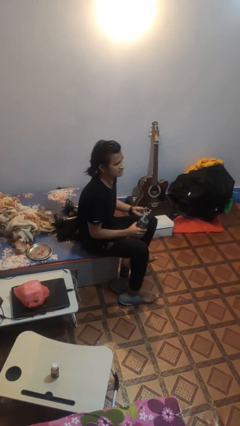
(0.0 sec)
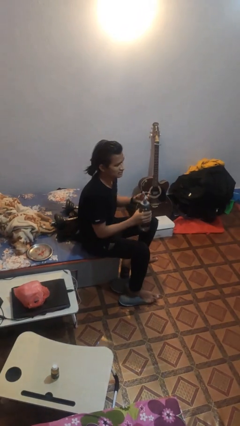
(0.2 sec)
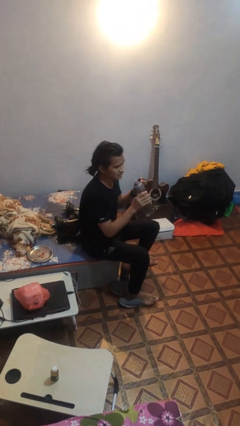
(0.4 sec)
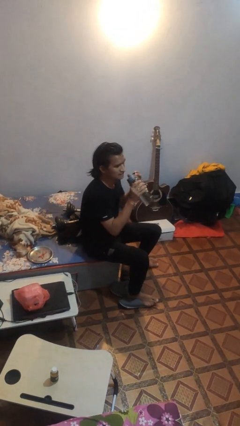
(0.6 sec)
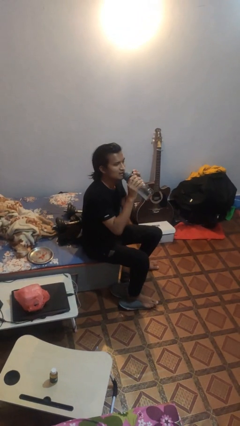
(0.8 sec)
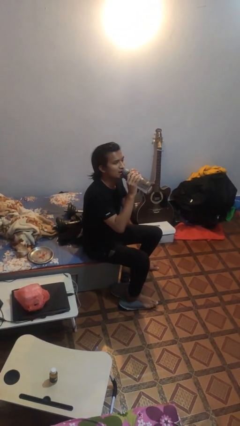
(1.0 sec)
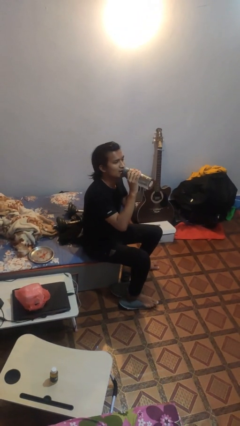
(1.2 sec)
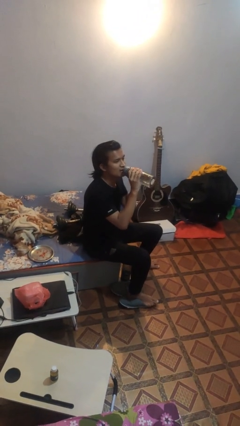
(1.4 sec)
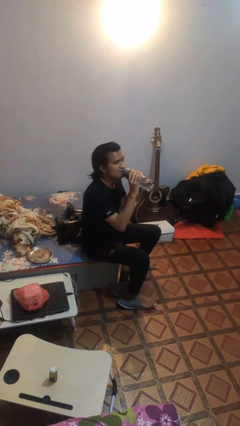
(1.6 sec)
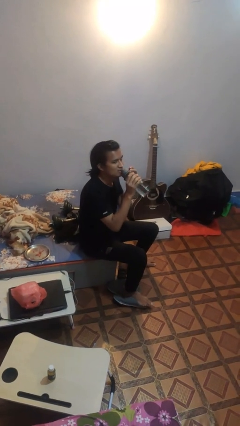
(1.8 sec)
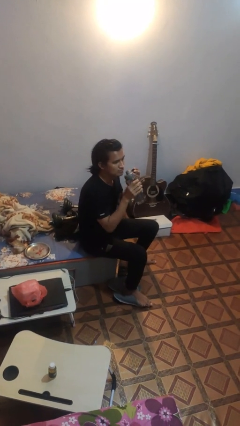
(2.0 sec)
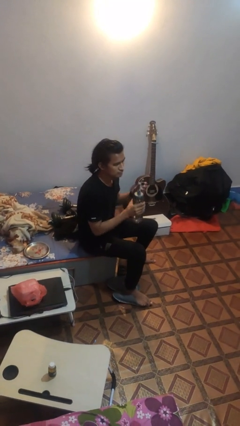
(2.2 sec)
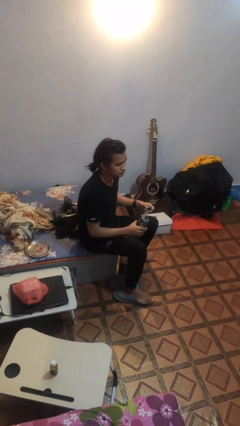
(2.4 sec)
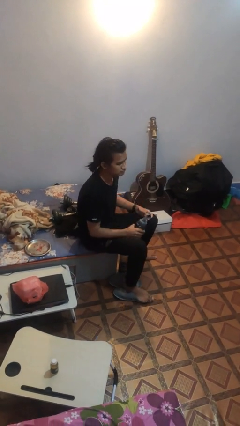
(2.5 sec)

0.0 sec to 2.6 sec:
person drinks from bottle

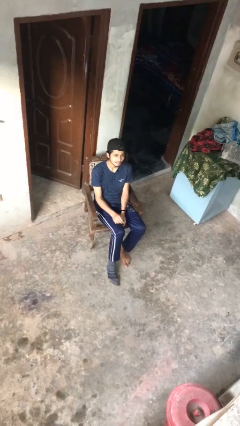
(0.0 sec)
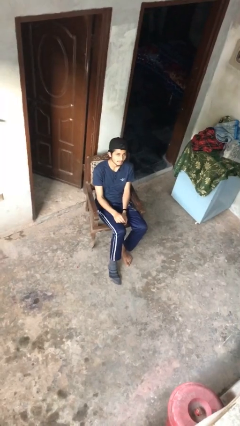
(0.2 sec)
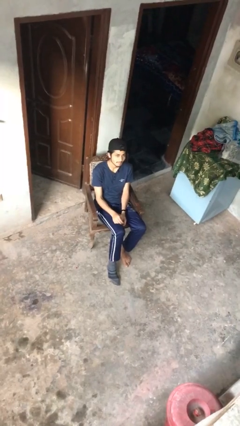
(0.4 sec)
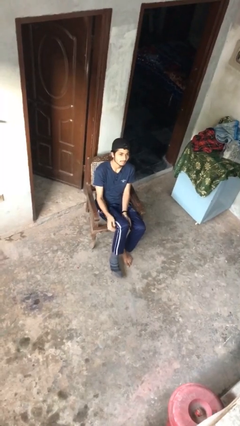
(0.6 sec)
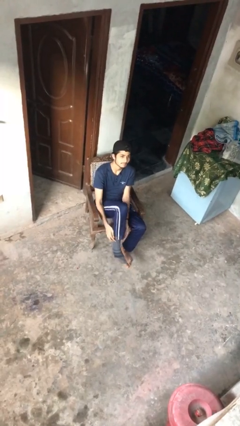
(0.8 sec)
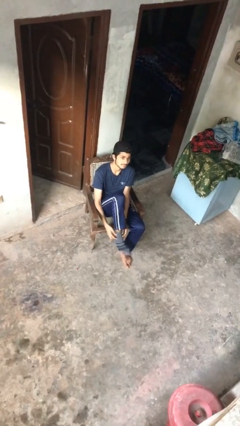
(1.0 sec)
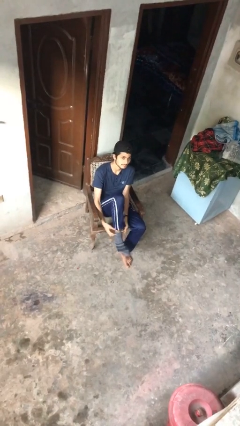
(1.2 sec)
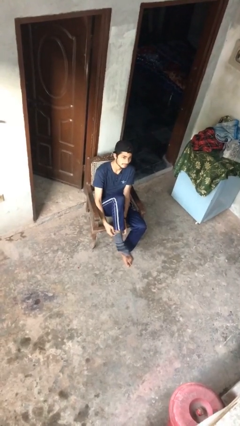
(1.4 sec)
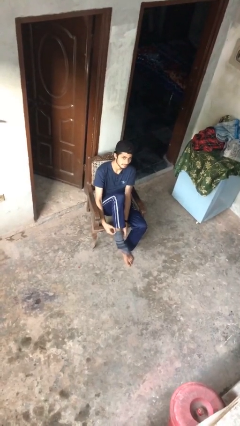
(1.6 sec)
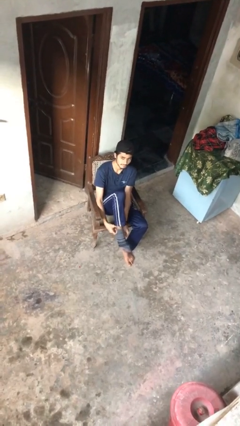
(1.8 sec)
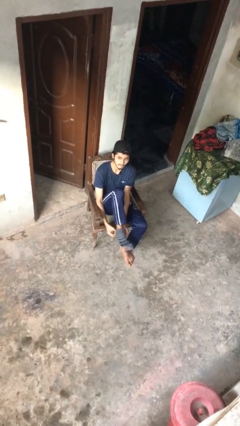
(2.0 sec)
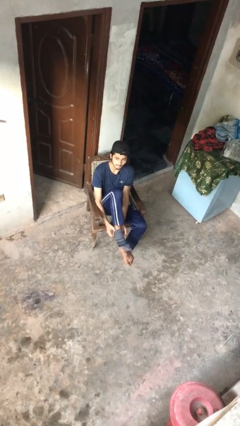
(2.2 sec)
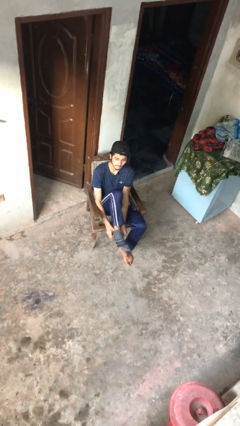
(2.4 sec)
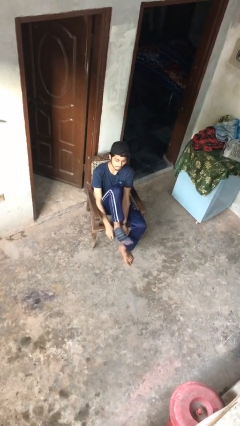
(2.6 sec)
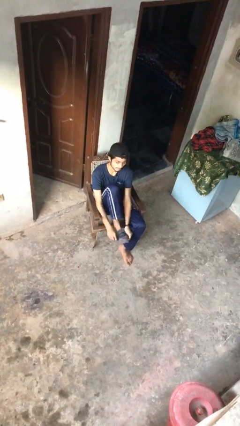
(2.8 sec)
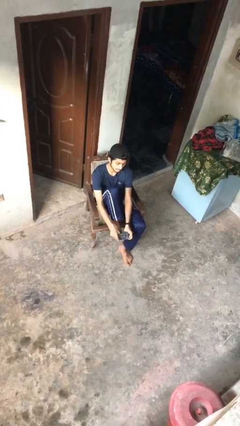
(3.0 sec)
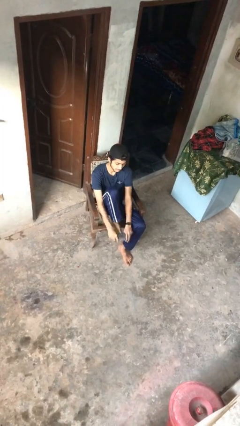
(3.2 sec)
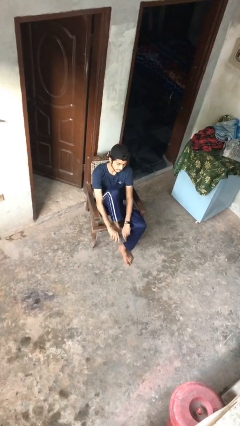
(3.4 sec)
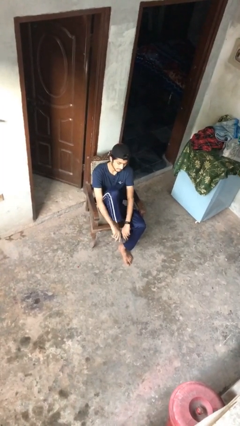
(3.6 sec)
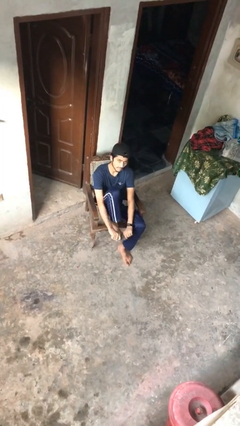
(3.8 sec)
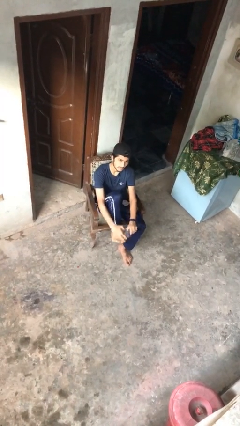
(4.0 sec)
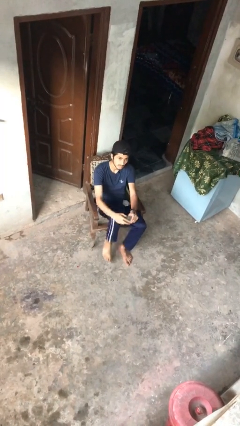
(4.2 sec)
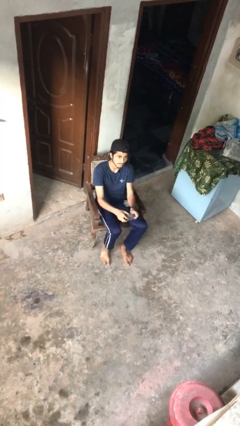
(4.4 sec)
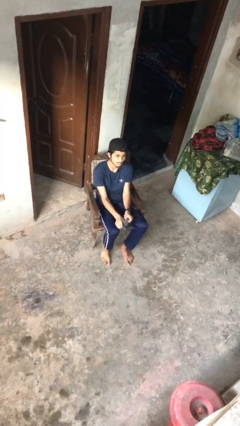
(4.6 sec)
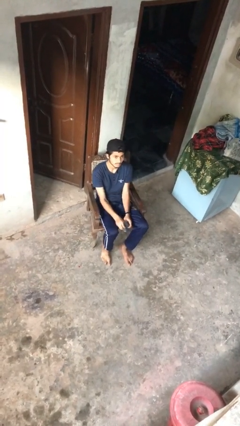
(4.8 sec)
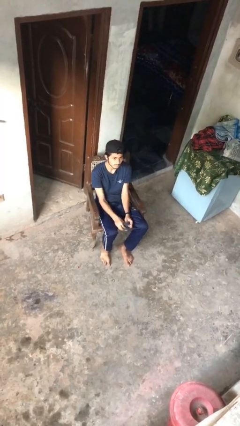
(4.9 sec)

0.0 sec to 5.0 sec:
person takes off socks

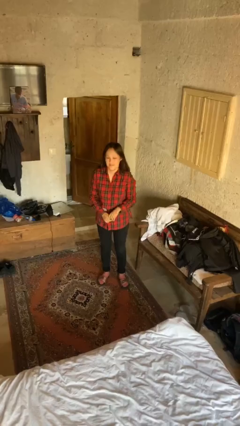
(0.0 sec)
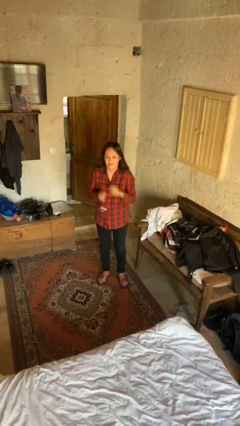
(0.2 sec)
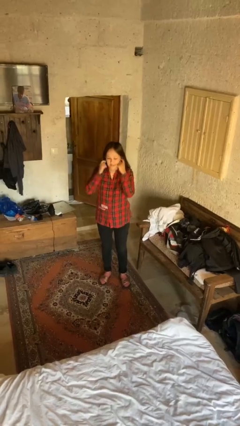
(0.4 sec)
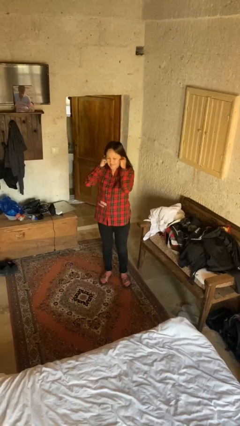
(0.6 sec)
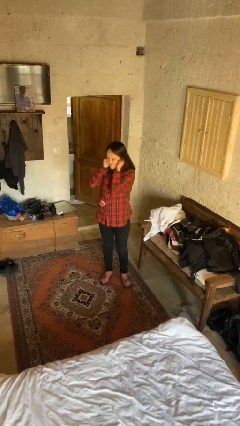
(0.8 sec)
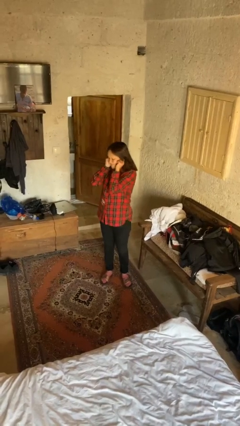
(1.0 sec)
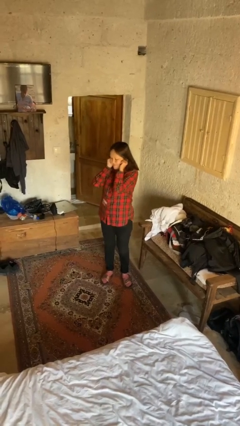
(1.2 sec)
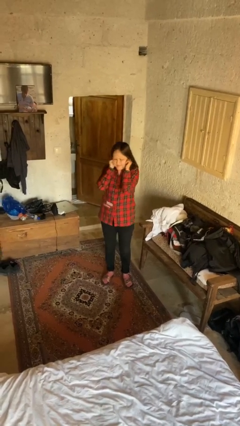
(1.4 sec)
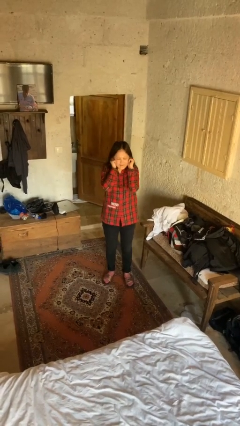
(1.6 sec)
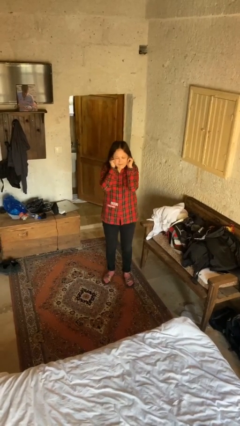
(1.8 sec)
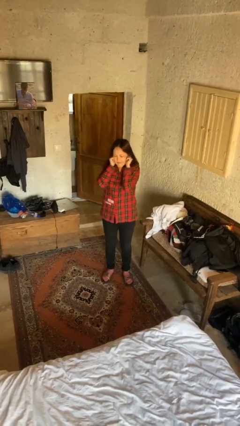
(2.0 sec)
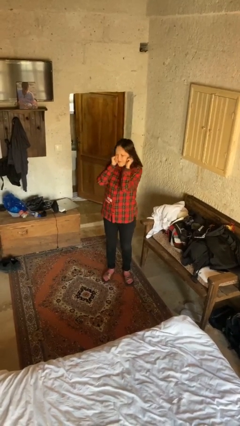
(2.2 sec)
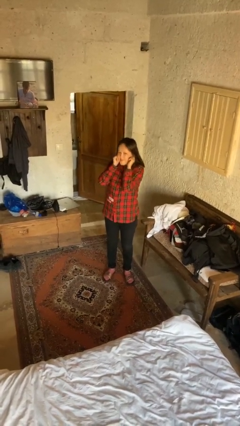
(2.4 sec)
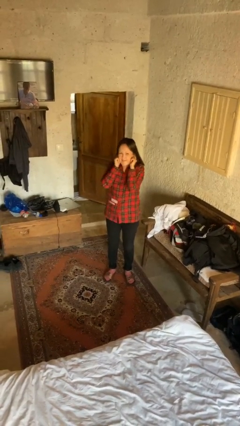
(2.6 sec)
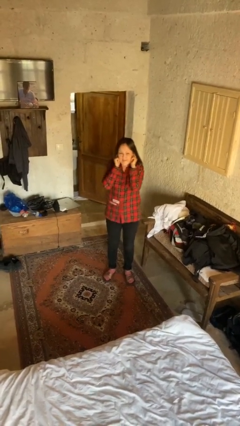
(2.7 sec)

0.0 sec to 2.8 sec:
person puts fingers in ear

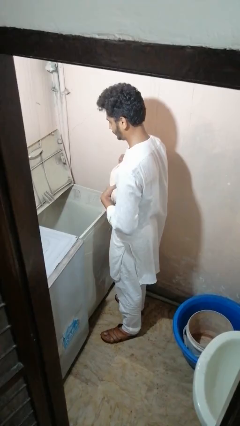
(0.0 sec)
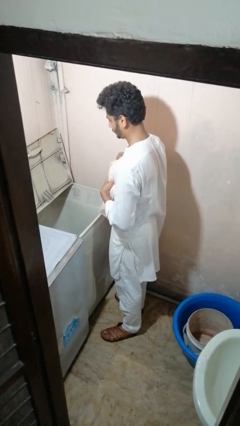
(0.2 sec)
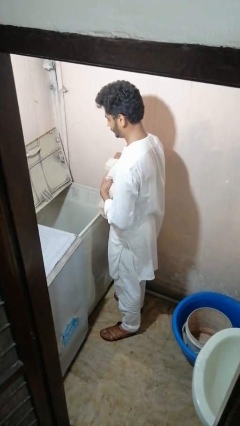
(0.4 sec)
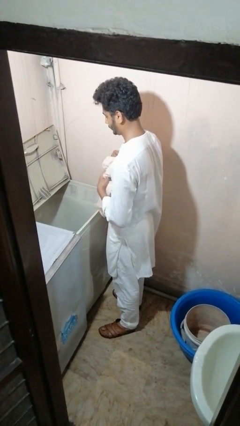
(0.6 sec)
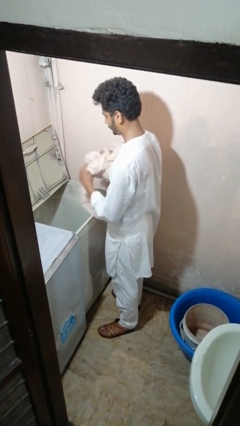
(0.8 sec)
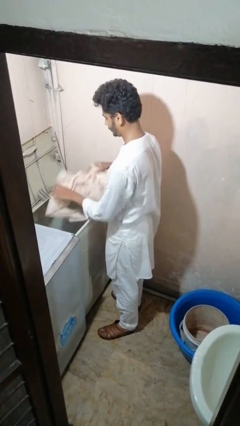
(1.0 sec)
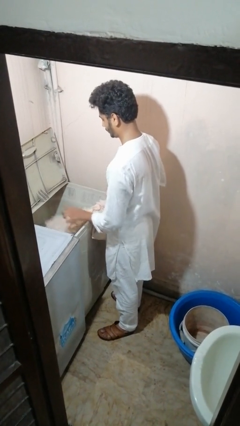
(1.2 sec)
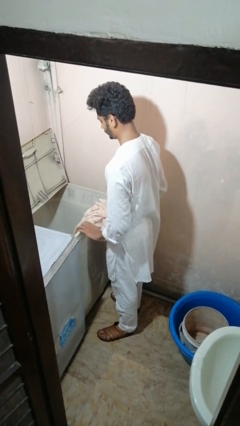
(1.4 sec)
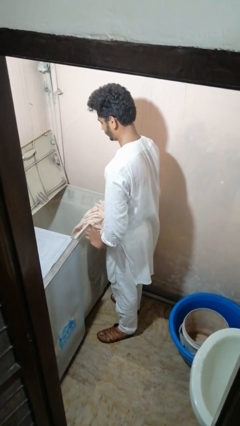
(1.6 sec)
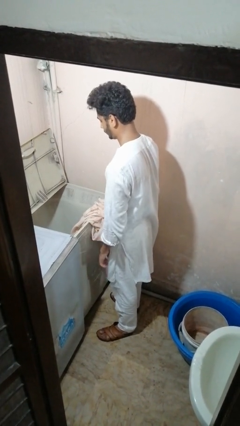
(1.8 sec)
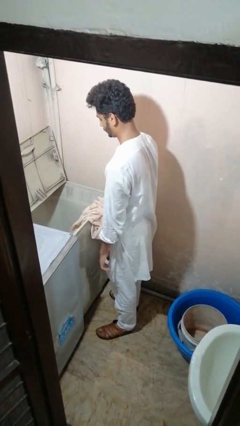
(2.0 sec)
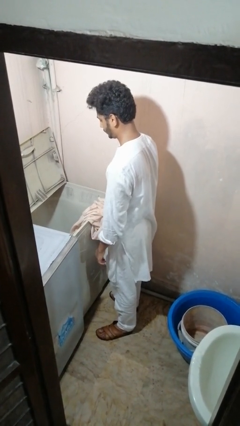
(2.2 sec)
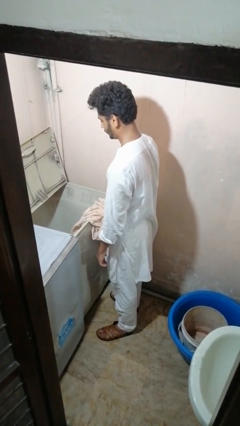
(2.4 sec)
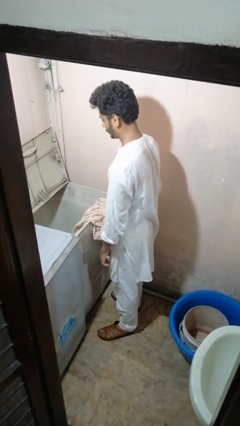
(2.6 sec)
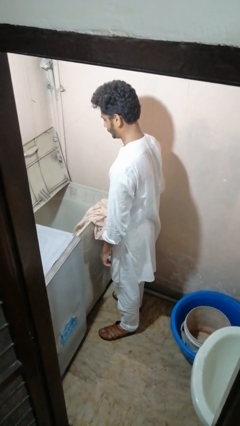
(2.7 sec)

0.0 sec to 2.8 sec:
person loads clotheswasher

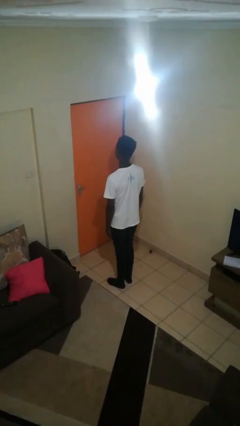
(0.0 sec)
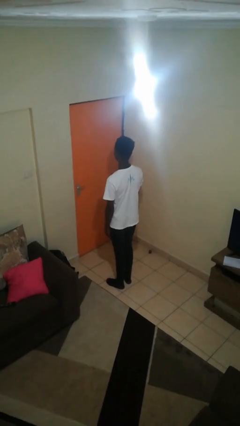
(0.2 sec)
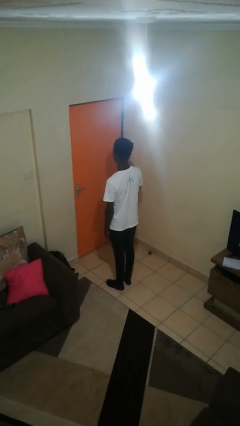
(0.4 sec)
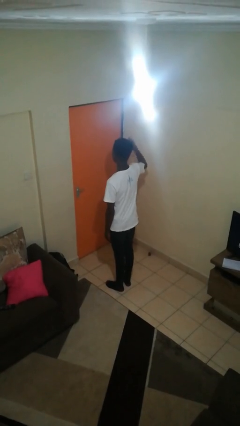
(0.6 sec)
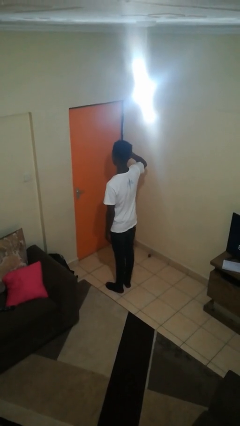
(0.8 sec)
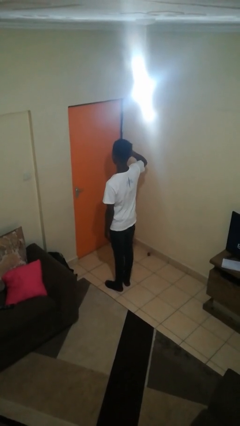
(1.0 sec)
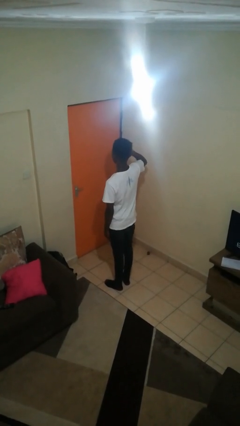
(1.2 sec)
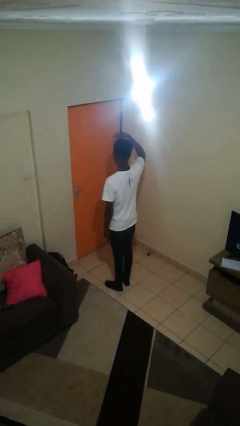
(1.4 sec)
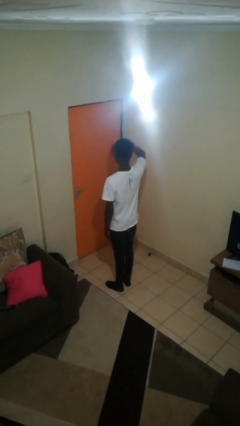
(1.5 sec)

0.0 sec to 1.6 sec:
person salutes

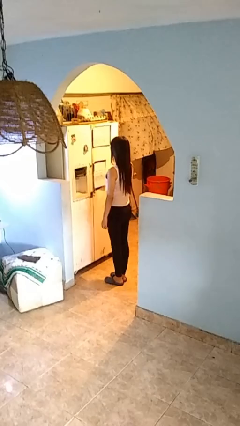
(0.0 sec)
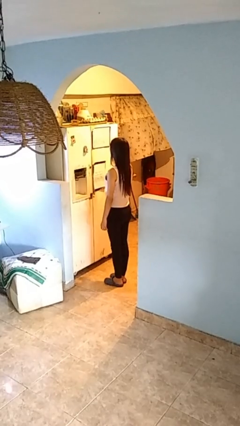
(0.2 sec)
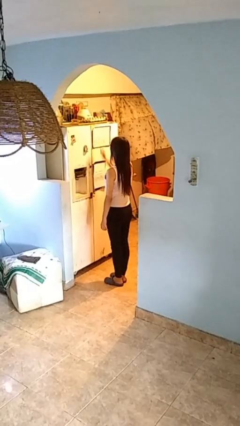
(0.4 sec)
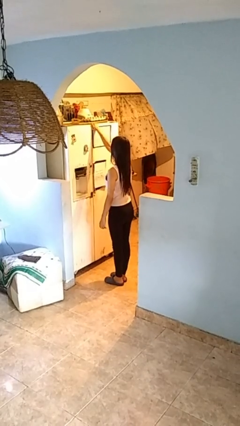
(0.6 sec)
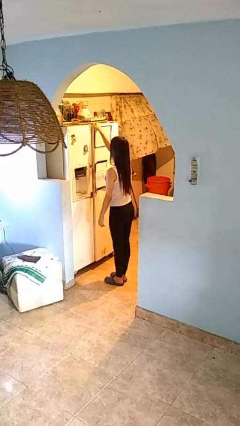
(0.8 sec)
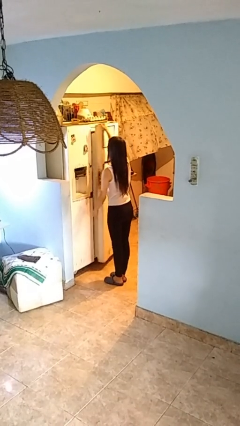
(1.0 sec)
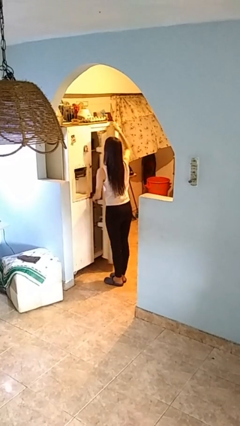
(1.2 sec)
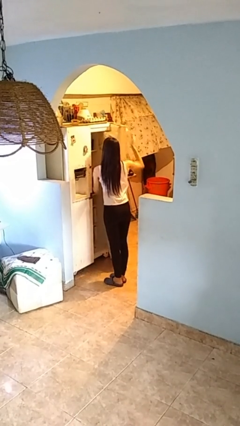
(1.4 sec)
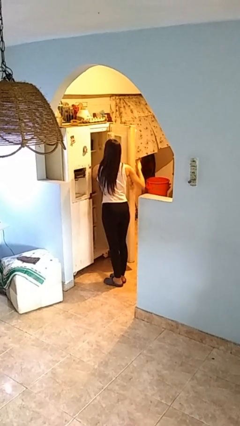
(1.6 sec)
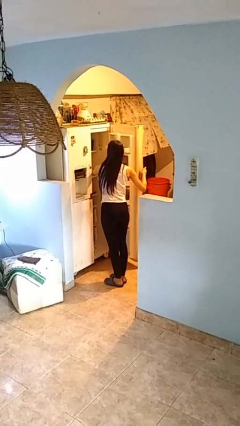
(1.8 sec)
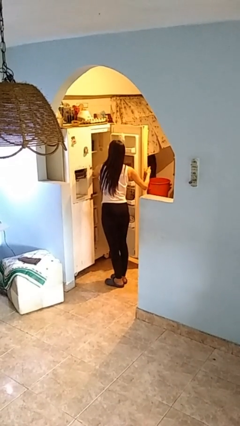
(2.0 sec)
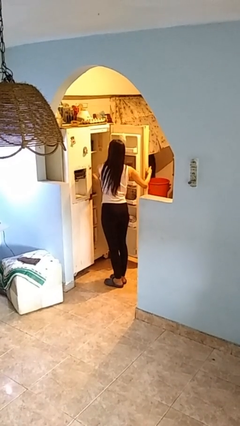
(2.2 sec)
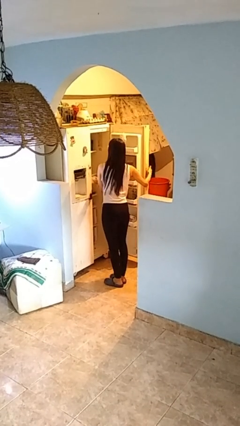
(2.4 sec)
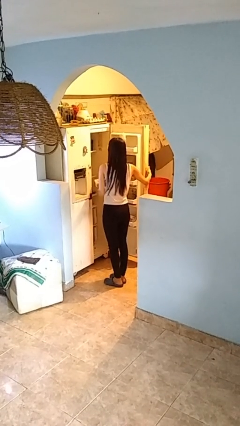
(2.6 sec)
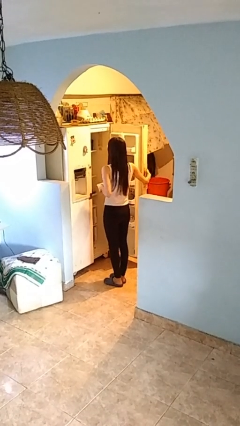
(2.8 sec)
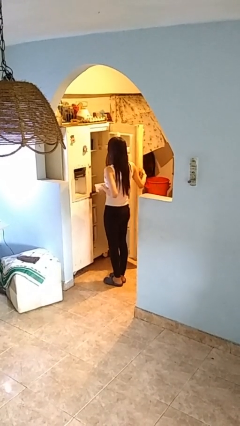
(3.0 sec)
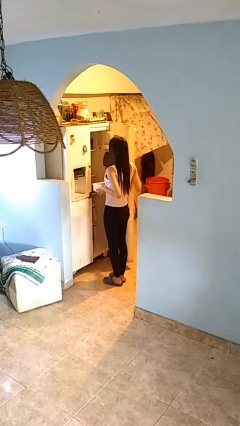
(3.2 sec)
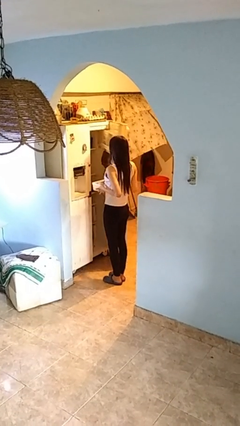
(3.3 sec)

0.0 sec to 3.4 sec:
person takes object from refrigerator
